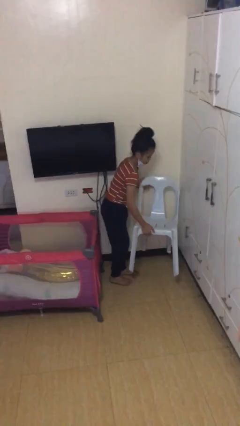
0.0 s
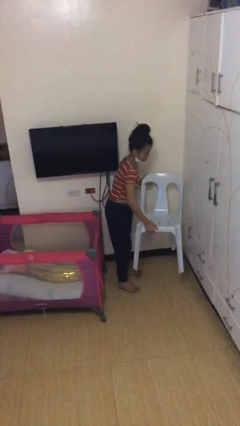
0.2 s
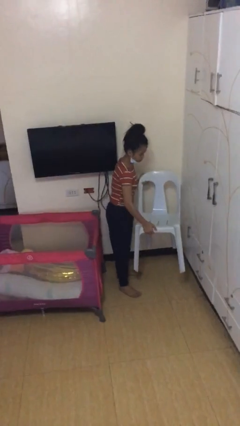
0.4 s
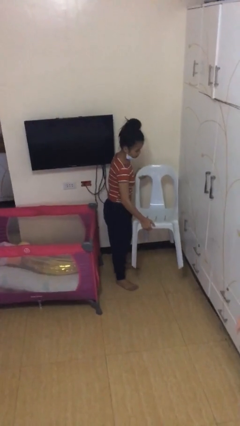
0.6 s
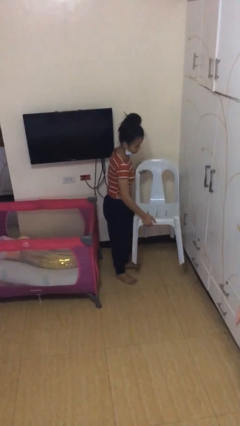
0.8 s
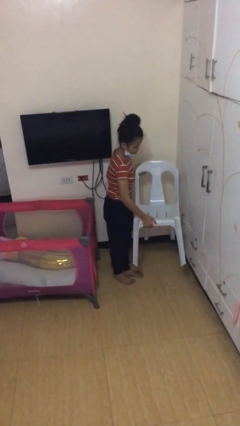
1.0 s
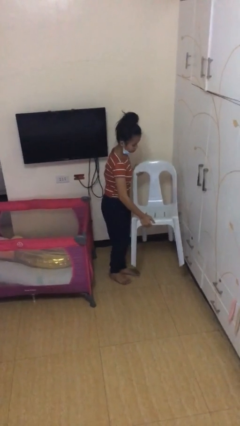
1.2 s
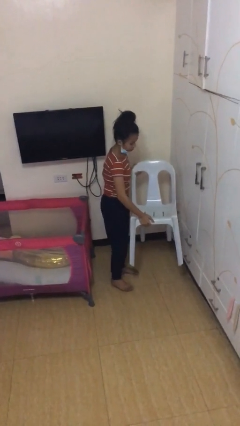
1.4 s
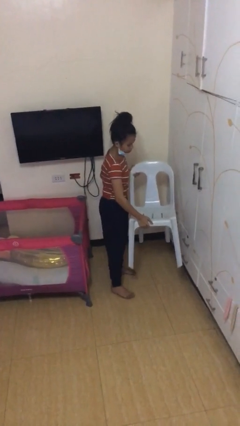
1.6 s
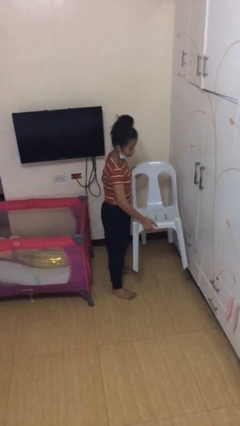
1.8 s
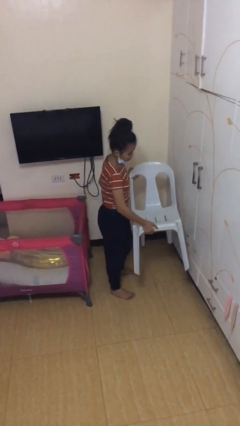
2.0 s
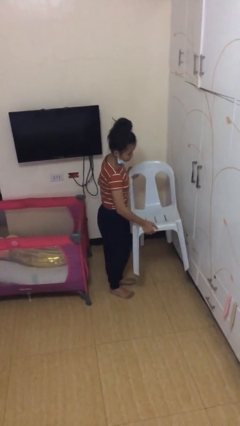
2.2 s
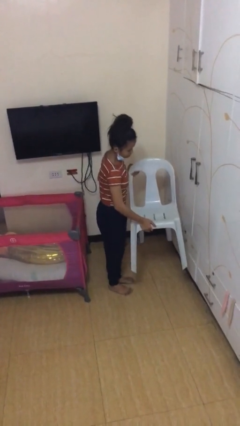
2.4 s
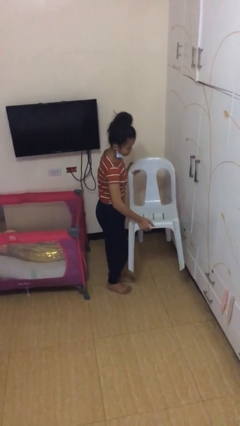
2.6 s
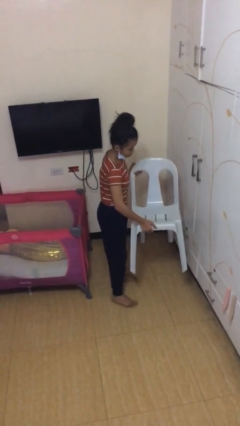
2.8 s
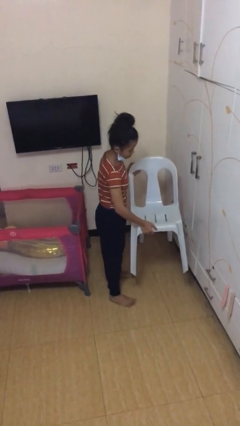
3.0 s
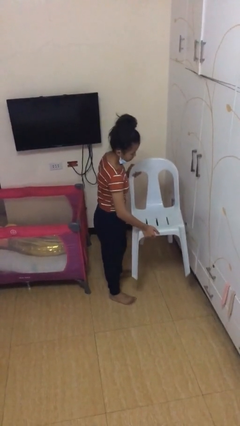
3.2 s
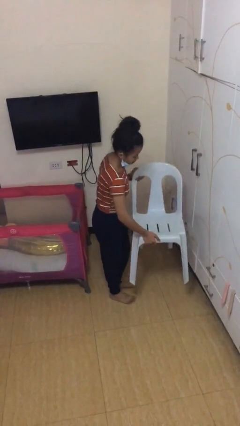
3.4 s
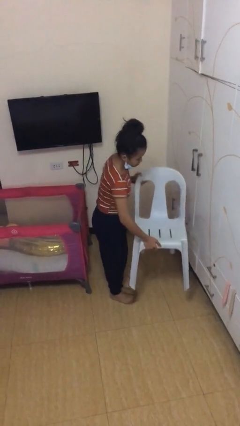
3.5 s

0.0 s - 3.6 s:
person carries heavy object

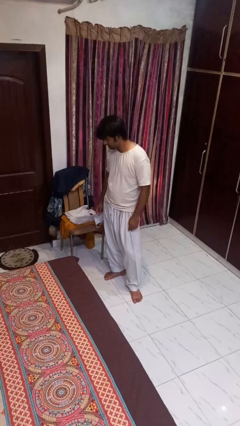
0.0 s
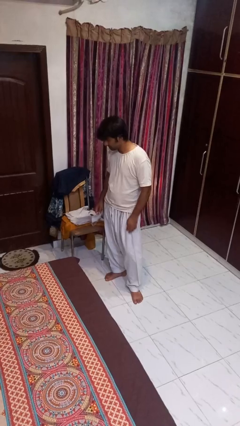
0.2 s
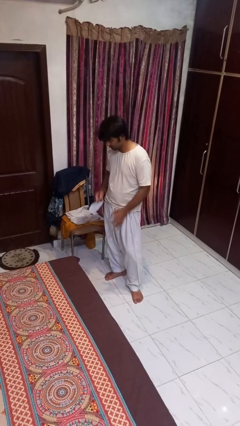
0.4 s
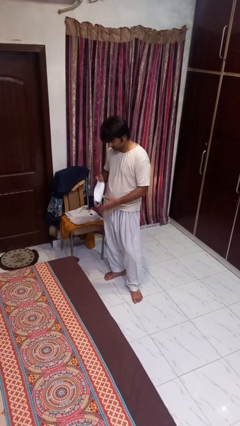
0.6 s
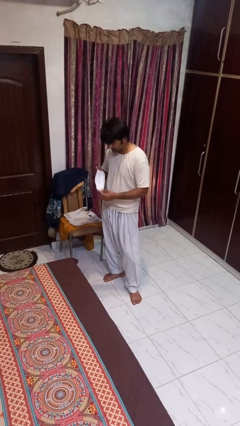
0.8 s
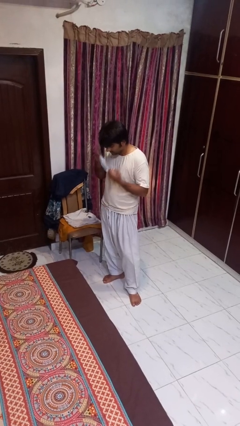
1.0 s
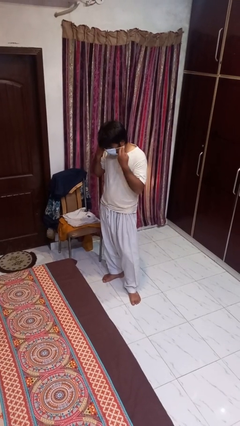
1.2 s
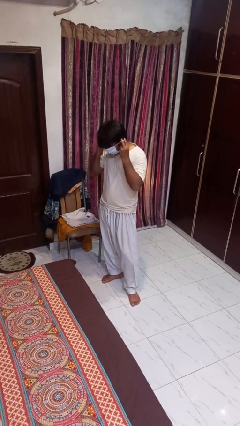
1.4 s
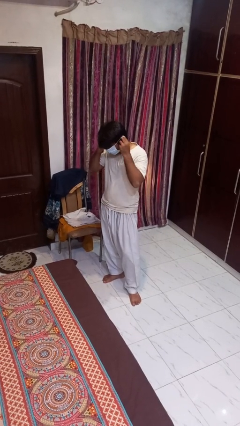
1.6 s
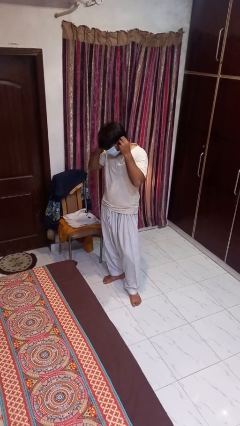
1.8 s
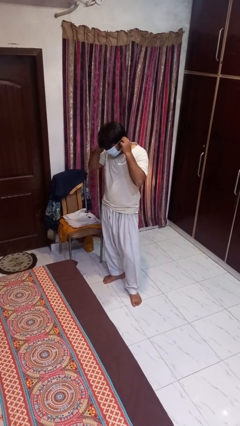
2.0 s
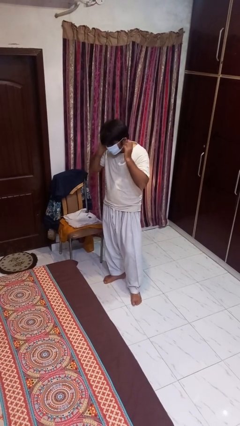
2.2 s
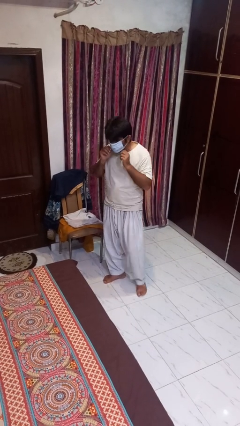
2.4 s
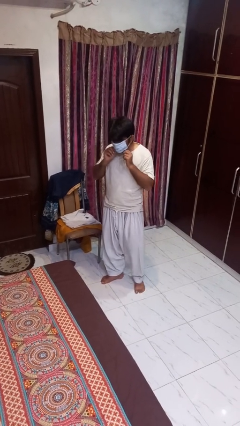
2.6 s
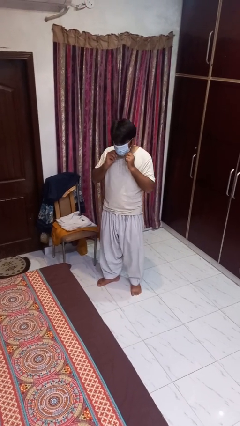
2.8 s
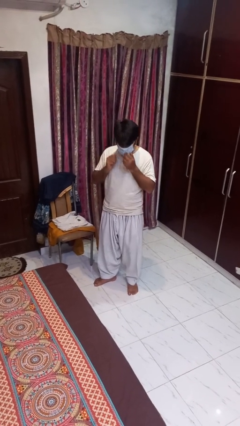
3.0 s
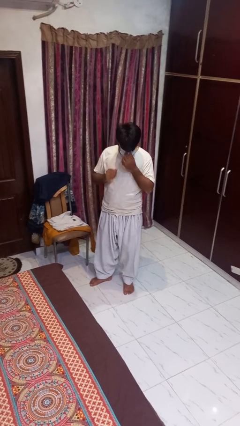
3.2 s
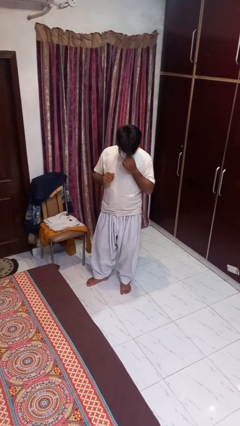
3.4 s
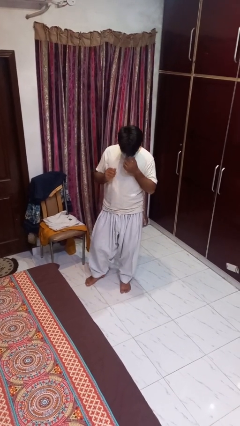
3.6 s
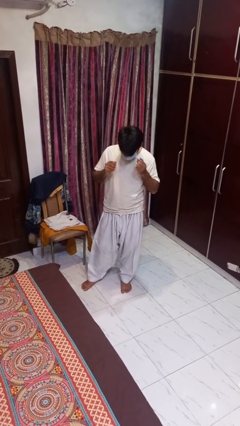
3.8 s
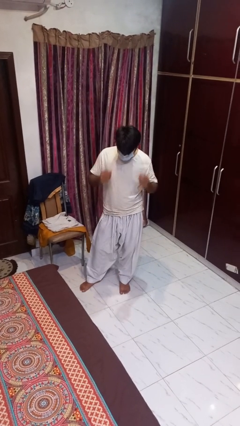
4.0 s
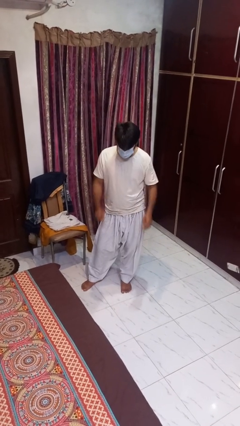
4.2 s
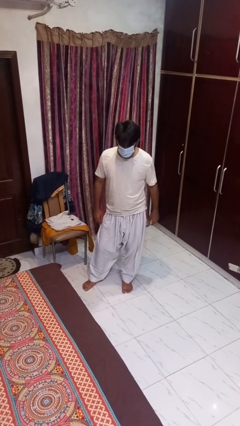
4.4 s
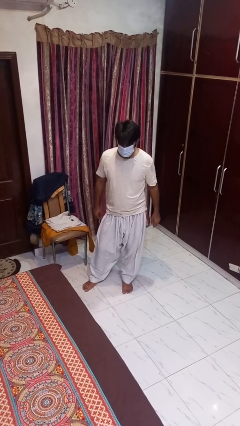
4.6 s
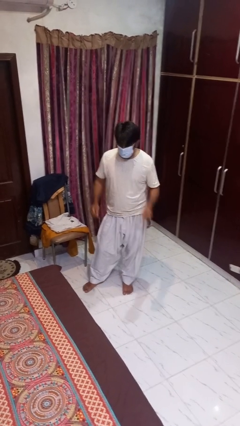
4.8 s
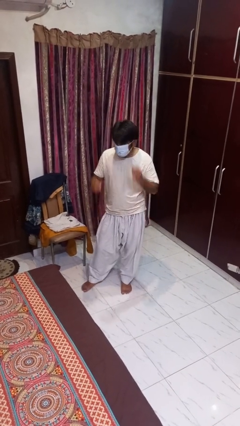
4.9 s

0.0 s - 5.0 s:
person puts on facemask

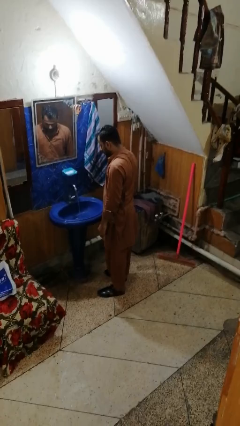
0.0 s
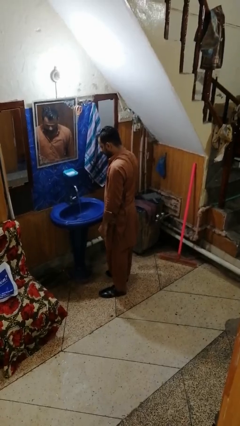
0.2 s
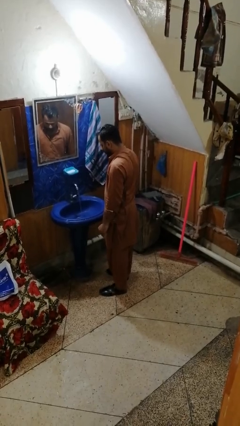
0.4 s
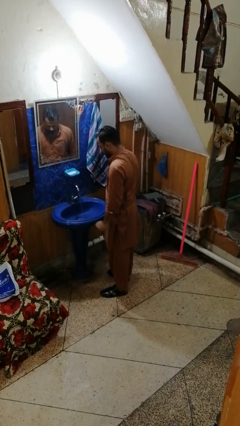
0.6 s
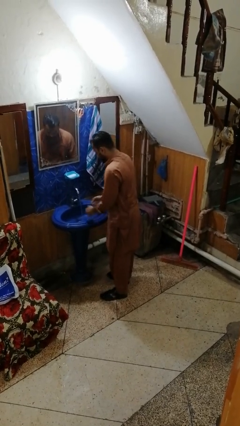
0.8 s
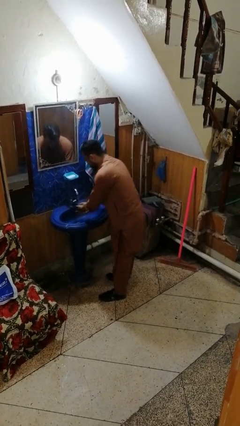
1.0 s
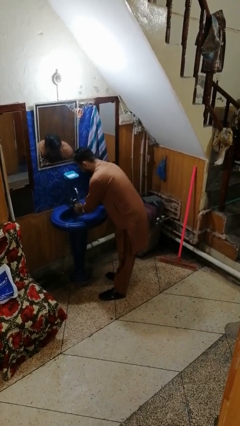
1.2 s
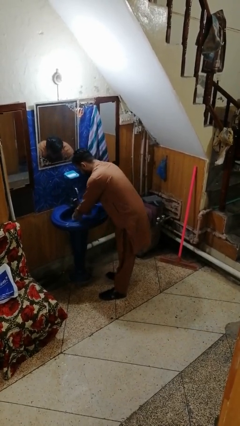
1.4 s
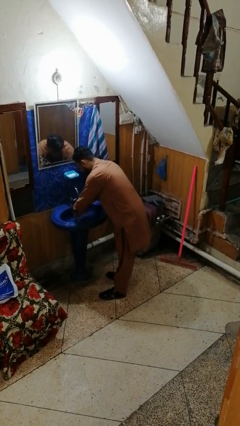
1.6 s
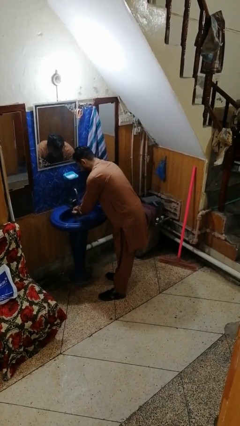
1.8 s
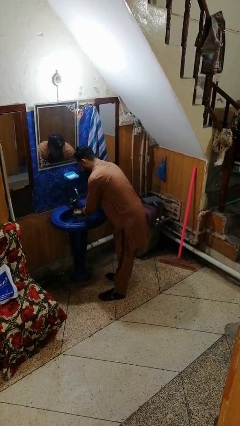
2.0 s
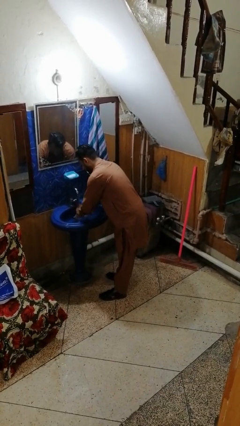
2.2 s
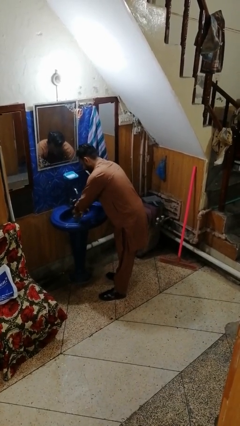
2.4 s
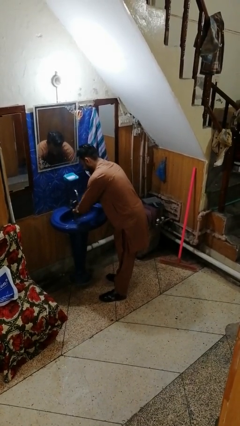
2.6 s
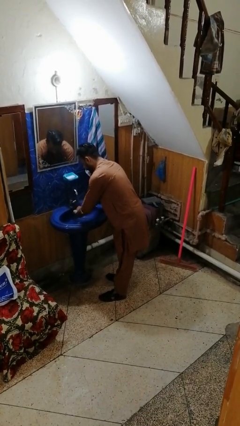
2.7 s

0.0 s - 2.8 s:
person washes hands

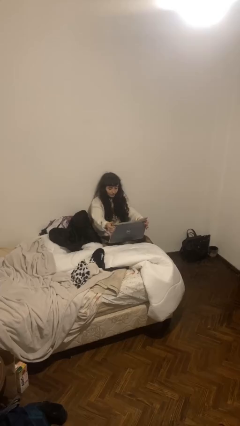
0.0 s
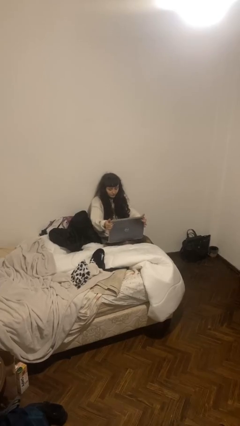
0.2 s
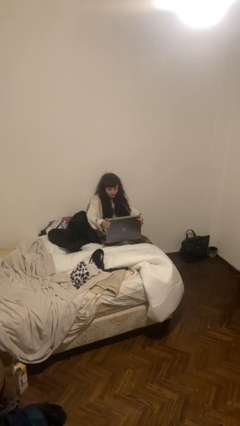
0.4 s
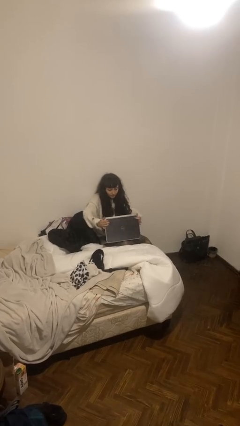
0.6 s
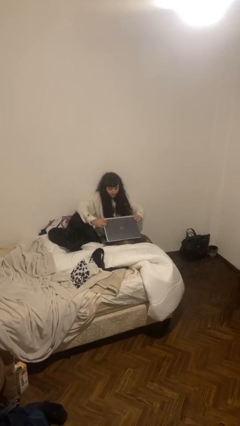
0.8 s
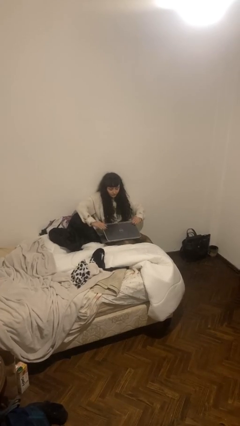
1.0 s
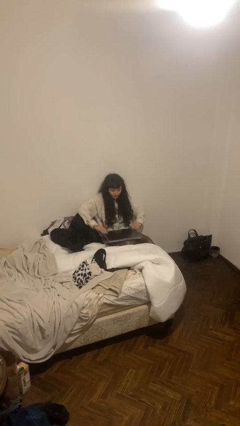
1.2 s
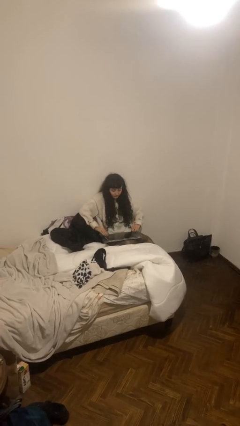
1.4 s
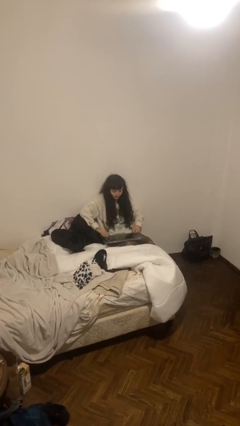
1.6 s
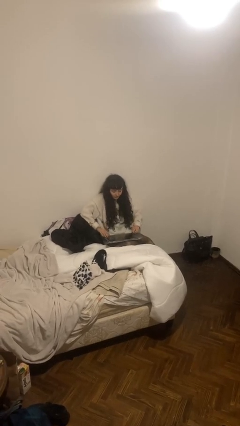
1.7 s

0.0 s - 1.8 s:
person closes laptop

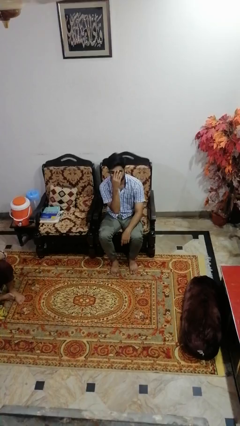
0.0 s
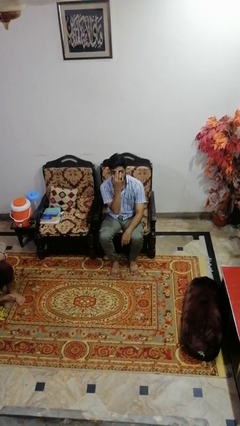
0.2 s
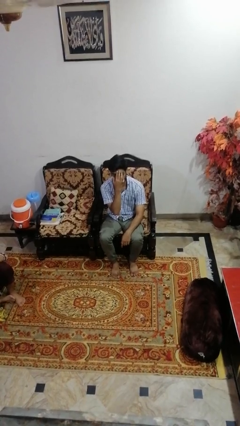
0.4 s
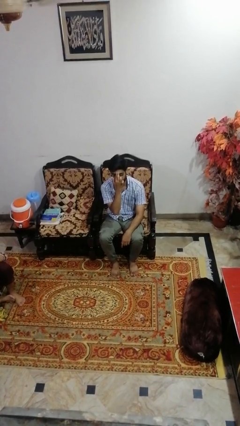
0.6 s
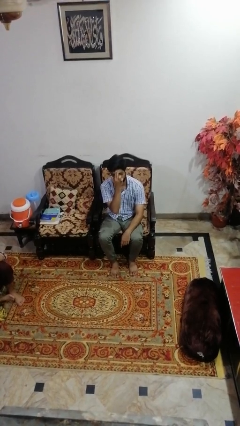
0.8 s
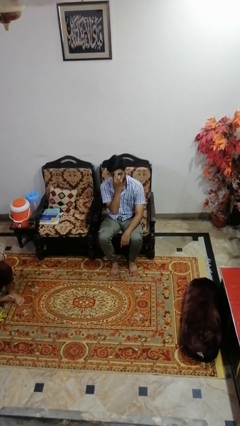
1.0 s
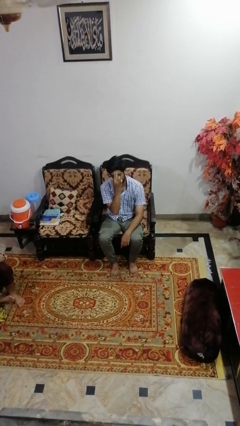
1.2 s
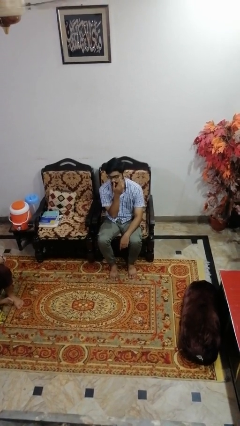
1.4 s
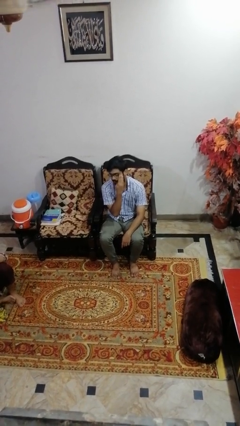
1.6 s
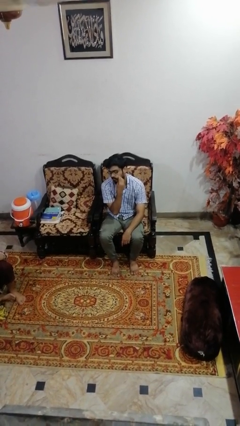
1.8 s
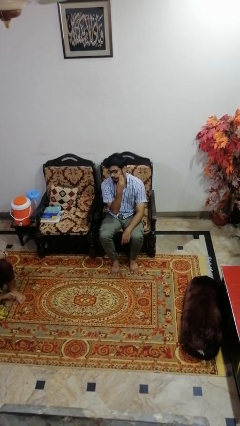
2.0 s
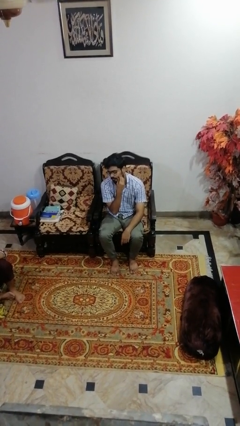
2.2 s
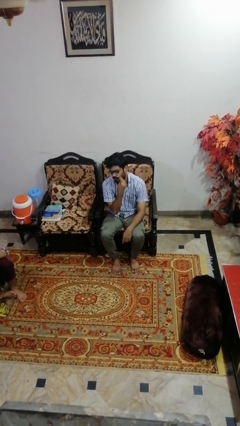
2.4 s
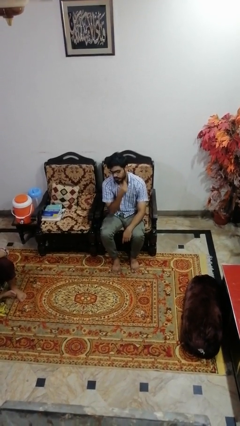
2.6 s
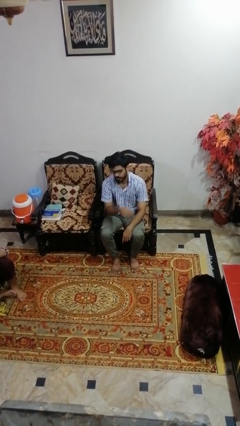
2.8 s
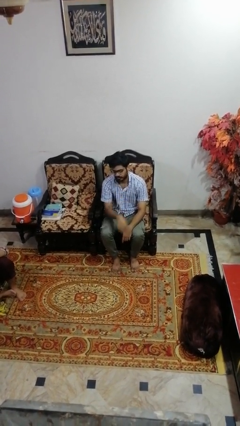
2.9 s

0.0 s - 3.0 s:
person scratches face

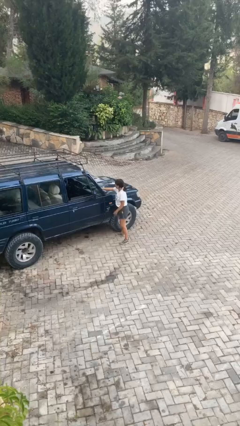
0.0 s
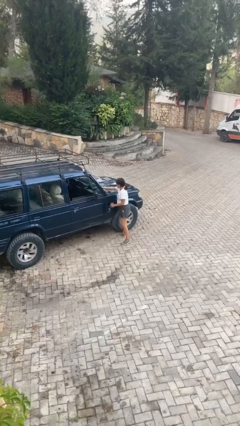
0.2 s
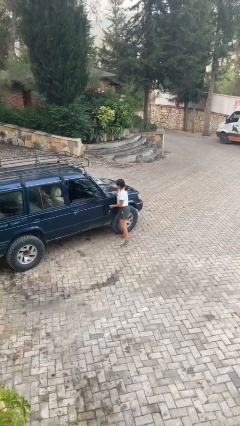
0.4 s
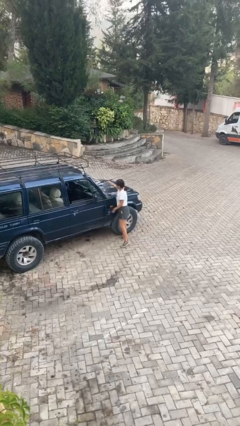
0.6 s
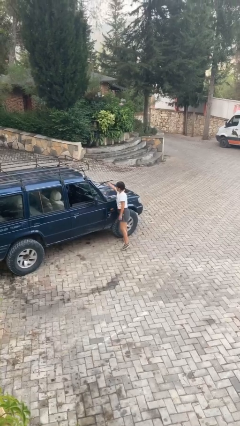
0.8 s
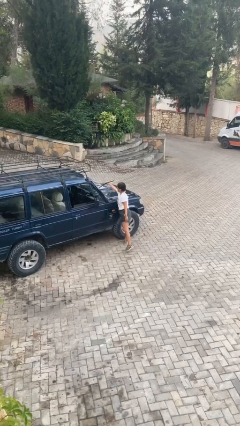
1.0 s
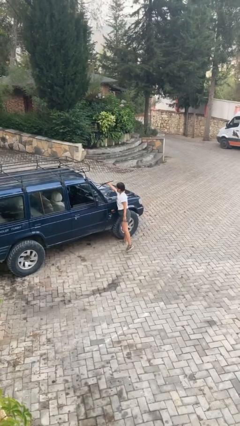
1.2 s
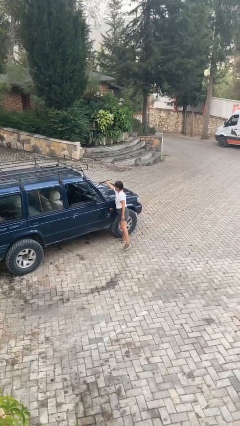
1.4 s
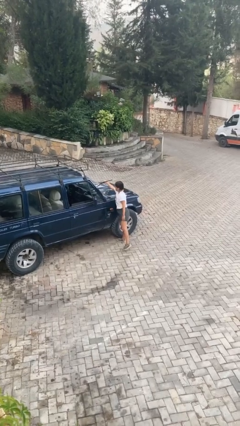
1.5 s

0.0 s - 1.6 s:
person flips up car wipers
